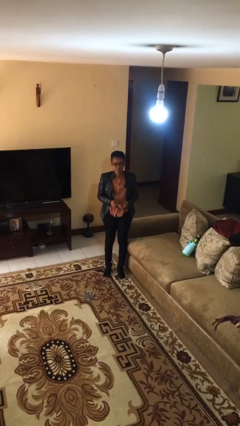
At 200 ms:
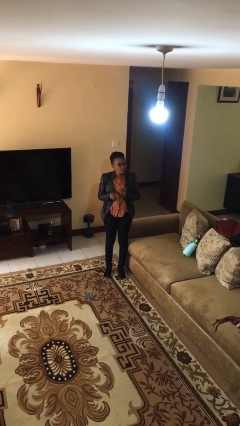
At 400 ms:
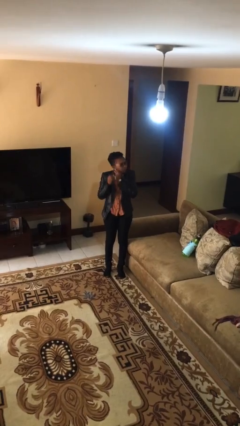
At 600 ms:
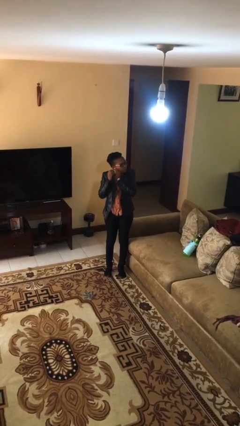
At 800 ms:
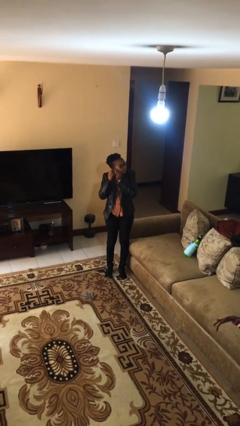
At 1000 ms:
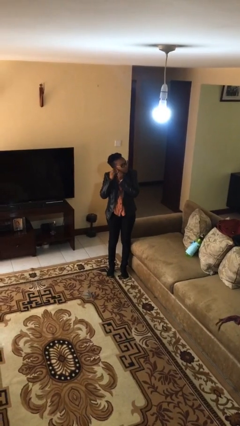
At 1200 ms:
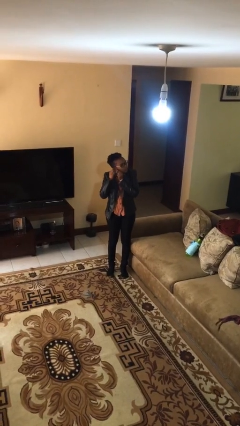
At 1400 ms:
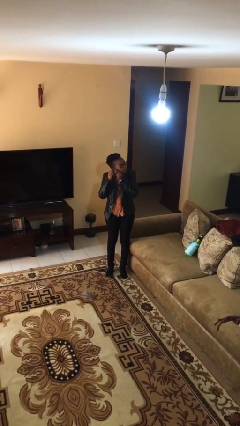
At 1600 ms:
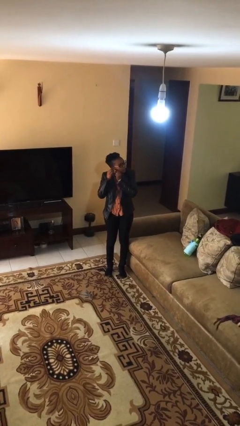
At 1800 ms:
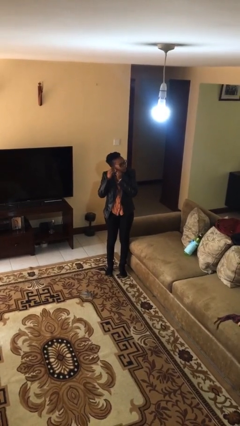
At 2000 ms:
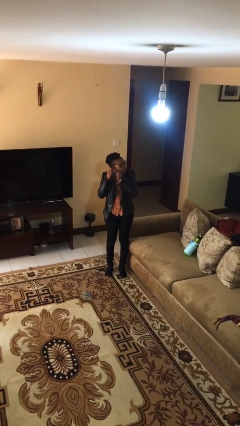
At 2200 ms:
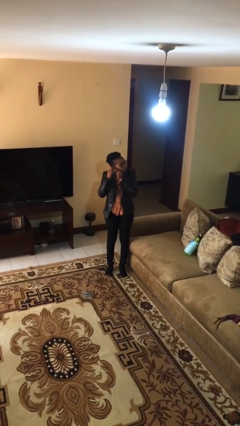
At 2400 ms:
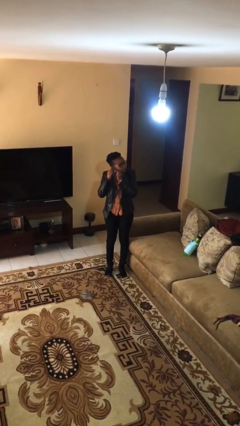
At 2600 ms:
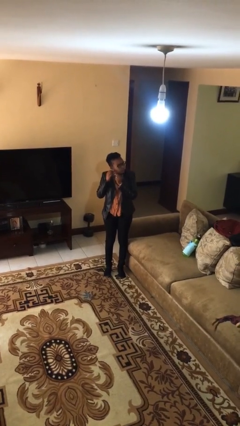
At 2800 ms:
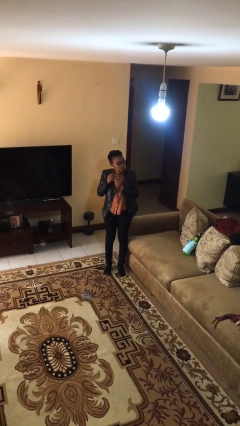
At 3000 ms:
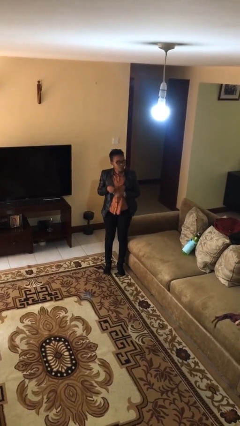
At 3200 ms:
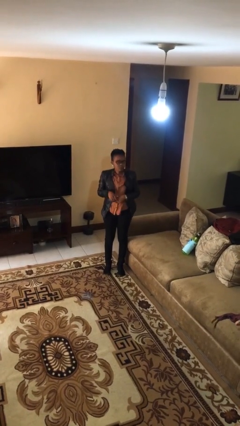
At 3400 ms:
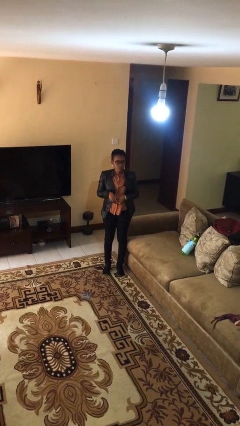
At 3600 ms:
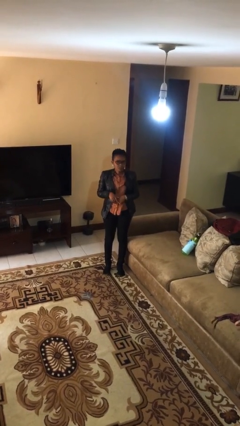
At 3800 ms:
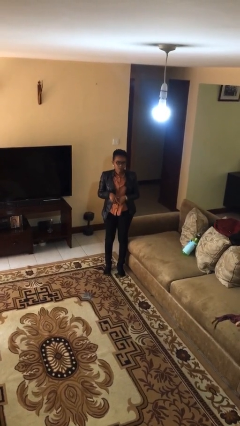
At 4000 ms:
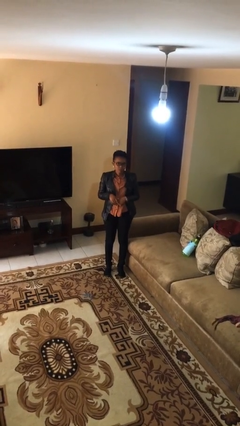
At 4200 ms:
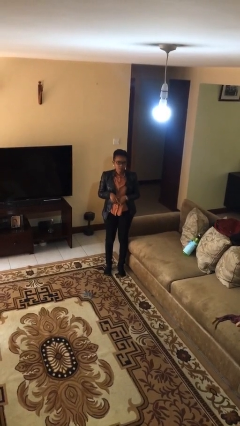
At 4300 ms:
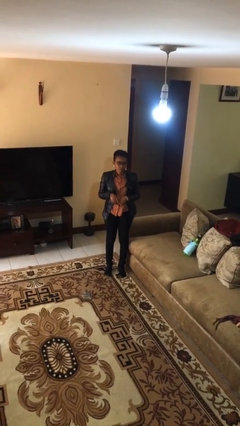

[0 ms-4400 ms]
person puts on earrings

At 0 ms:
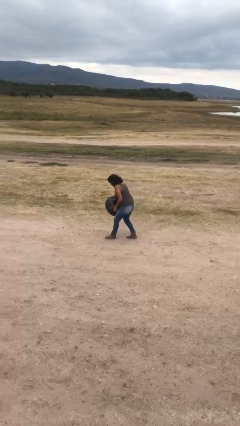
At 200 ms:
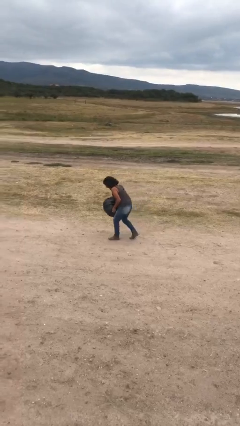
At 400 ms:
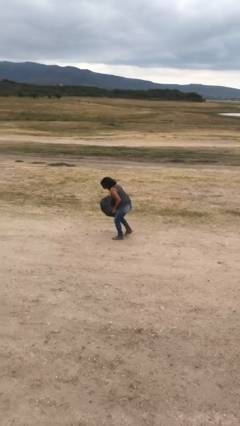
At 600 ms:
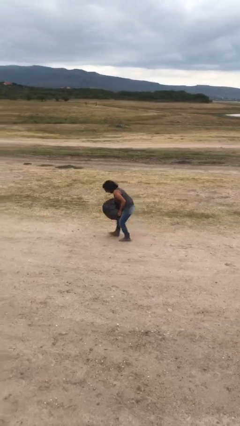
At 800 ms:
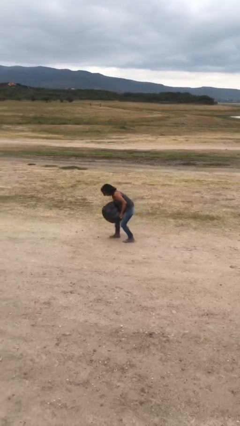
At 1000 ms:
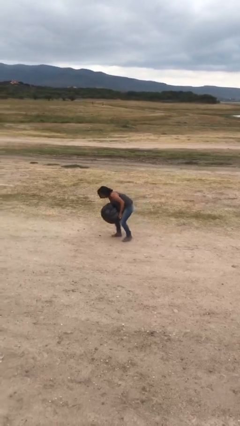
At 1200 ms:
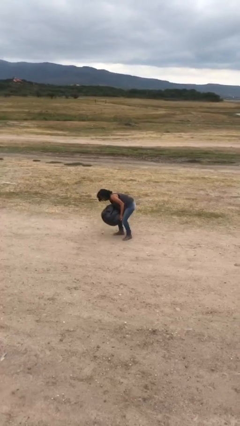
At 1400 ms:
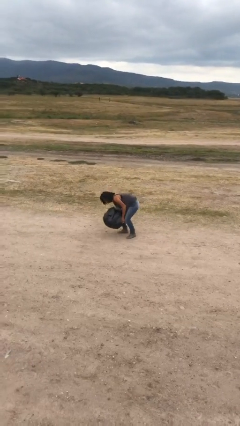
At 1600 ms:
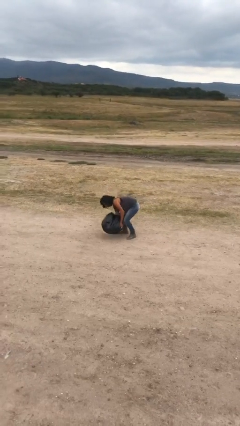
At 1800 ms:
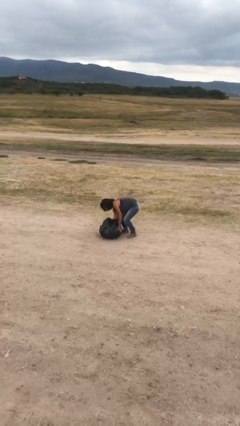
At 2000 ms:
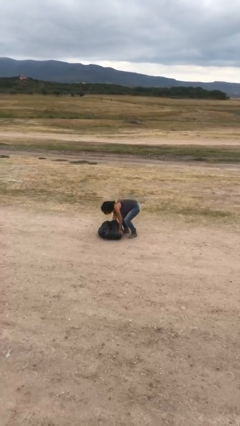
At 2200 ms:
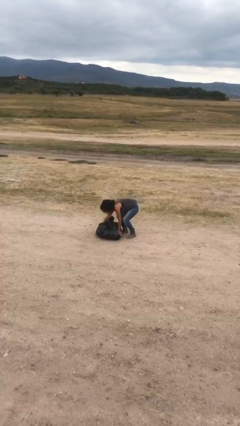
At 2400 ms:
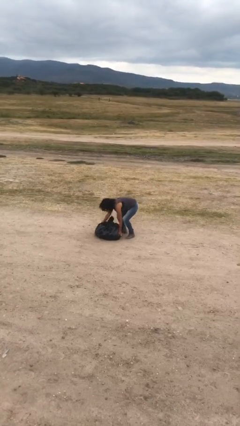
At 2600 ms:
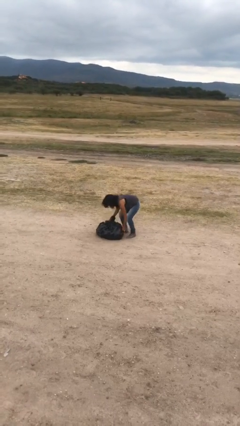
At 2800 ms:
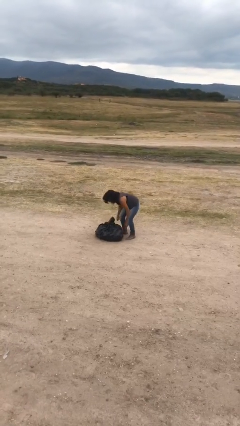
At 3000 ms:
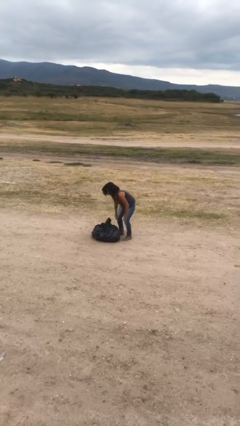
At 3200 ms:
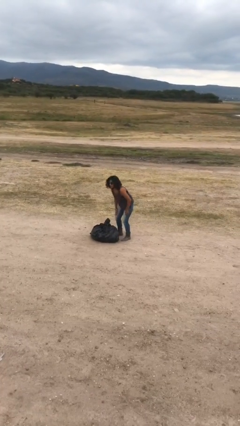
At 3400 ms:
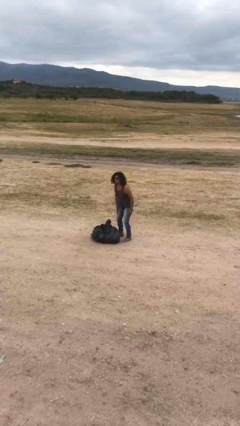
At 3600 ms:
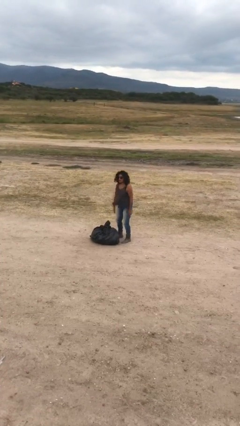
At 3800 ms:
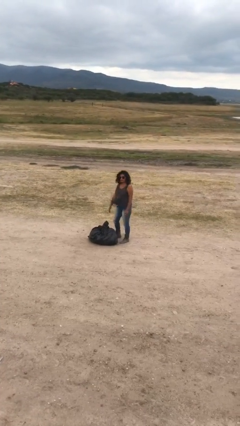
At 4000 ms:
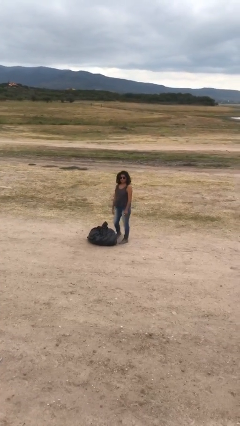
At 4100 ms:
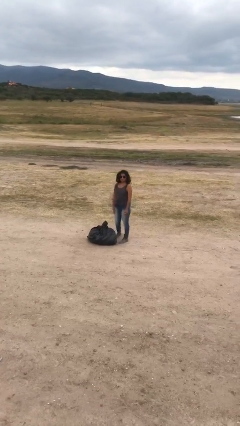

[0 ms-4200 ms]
person puts down object on floor

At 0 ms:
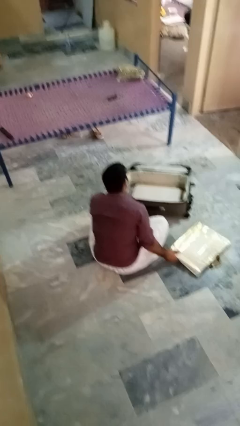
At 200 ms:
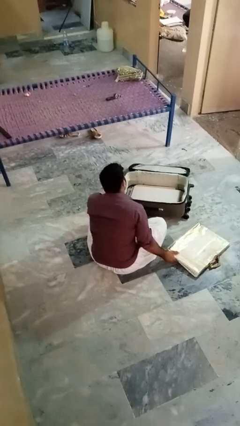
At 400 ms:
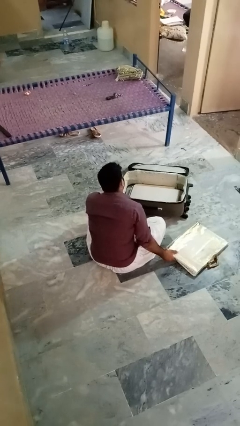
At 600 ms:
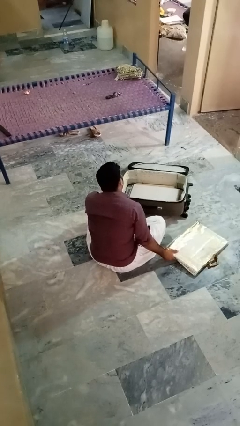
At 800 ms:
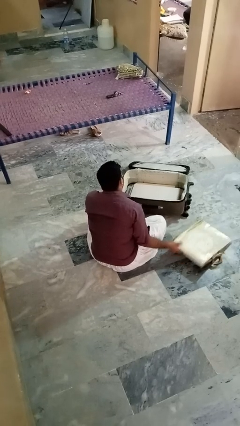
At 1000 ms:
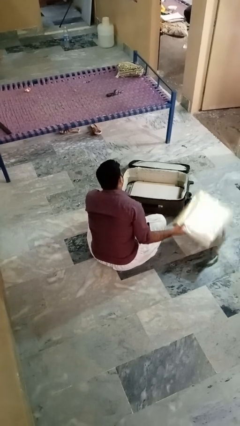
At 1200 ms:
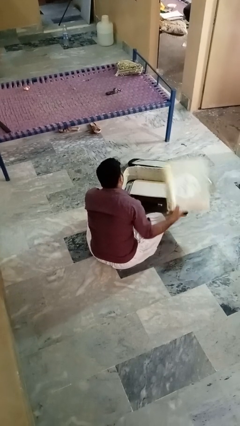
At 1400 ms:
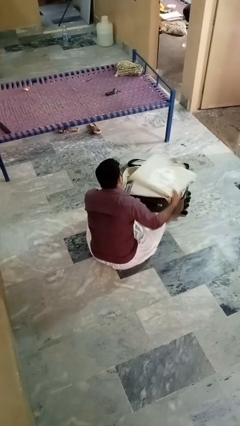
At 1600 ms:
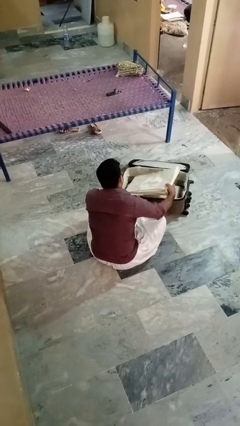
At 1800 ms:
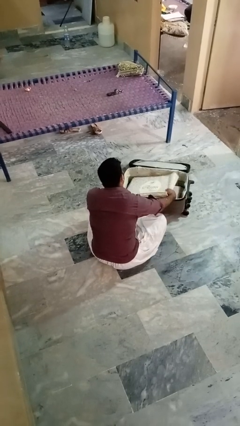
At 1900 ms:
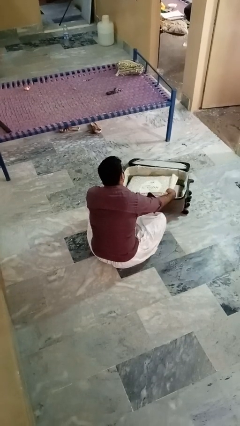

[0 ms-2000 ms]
person puts object into bag

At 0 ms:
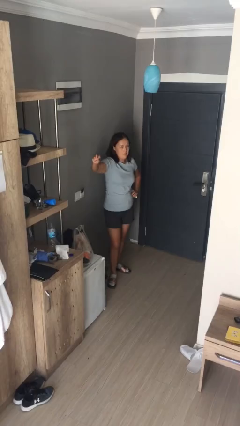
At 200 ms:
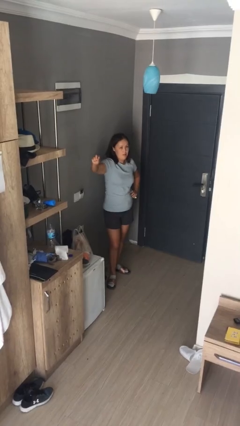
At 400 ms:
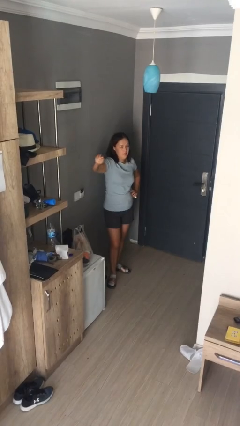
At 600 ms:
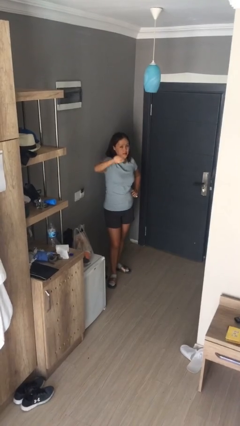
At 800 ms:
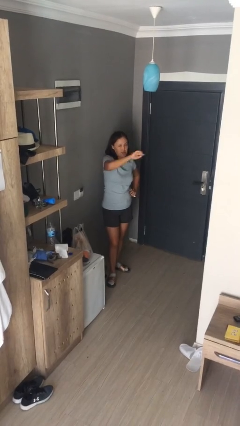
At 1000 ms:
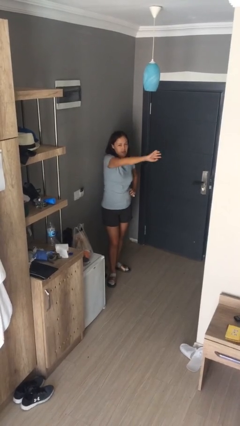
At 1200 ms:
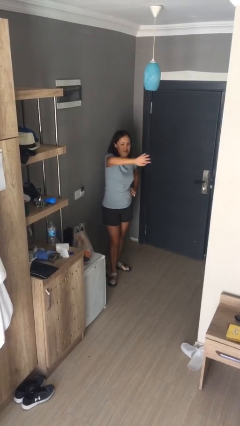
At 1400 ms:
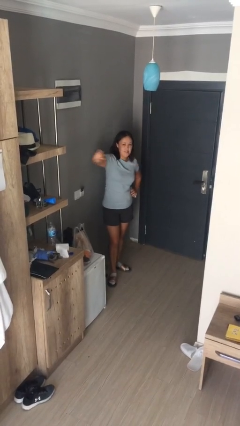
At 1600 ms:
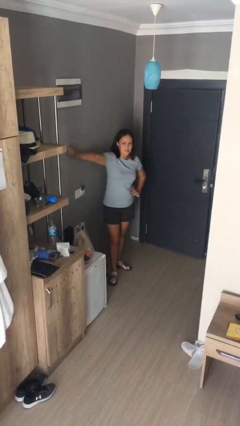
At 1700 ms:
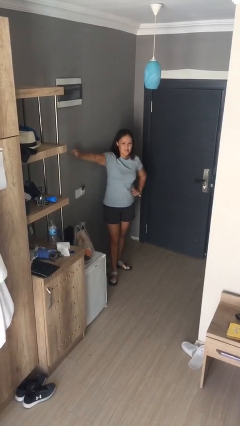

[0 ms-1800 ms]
person gestures swipe right

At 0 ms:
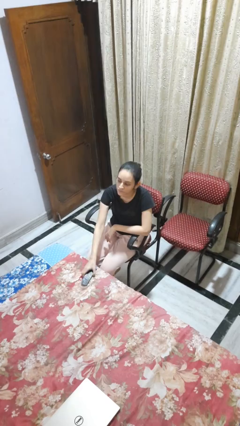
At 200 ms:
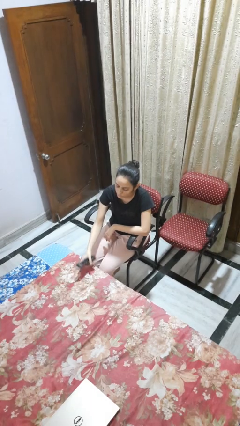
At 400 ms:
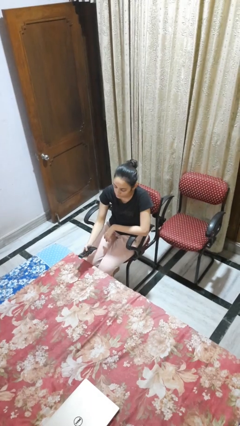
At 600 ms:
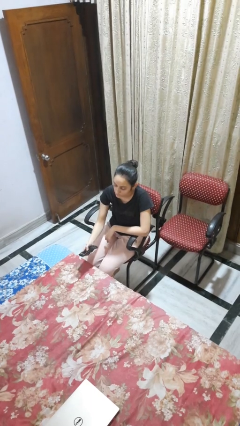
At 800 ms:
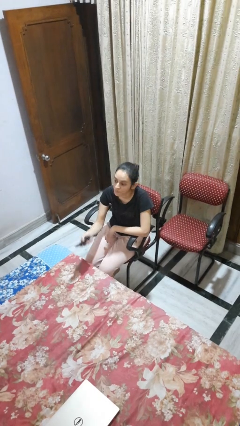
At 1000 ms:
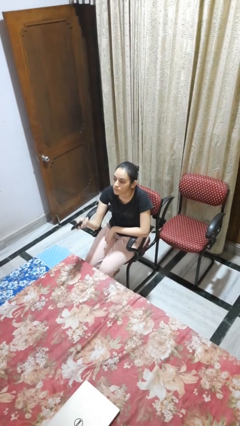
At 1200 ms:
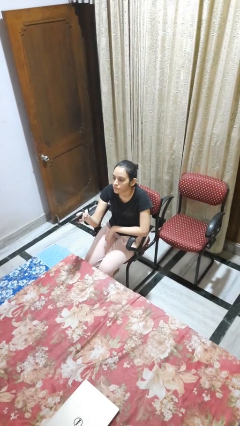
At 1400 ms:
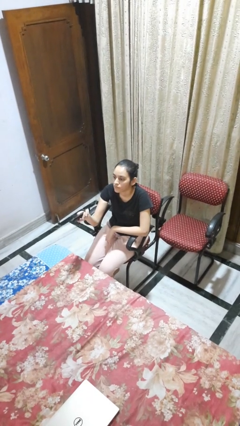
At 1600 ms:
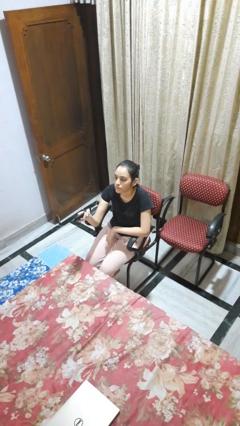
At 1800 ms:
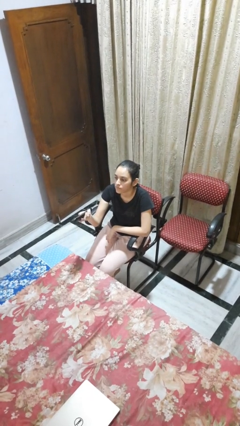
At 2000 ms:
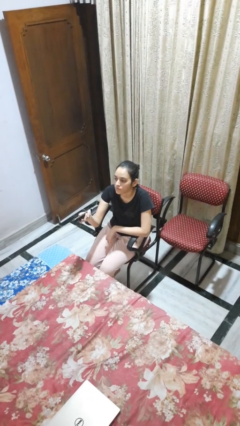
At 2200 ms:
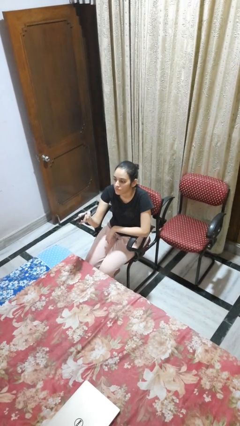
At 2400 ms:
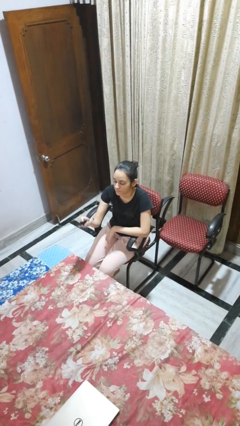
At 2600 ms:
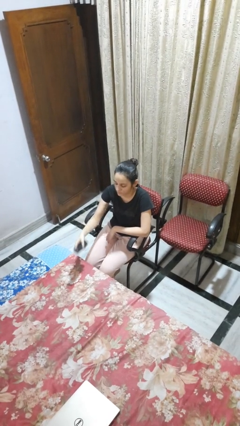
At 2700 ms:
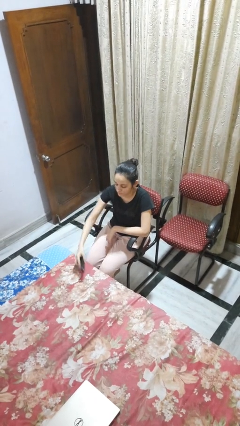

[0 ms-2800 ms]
person uses television remote

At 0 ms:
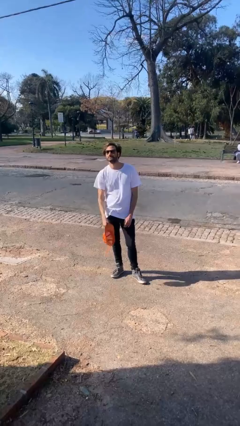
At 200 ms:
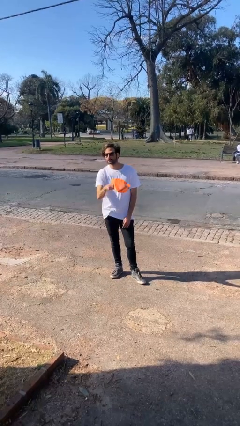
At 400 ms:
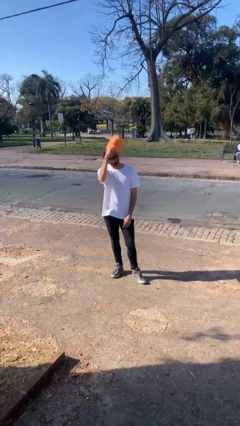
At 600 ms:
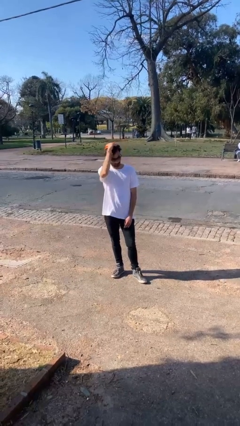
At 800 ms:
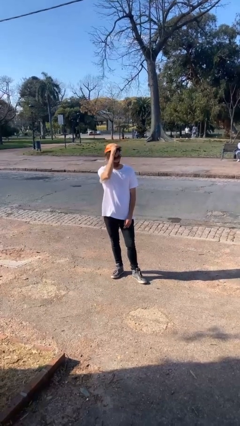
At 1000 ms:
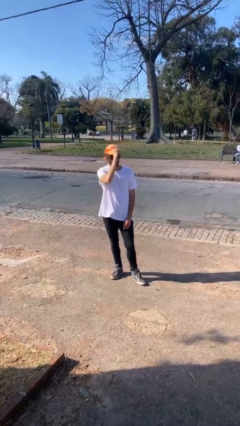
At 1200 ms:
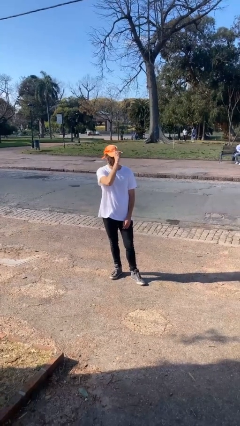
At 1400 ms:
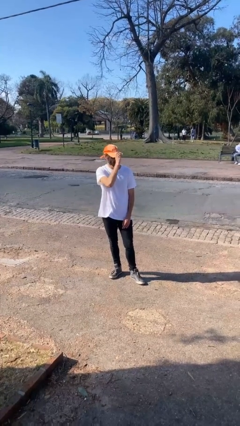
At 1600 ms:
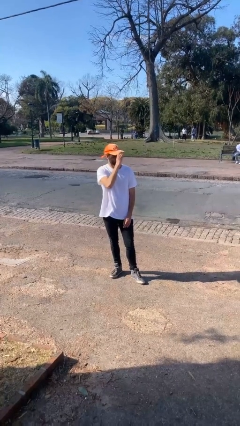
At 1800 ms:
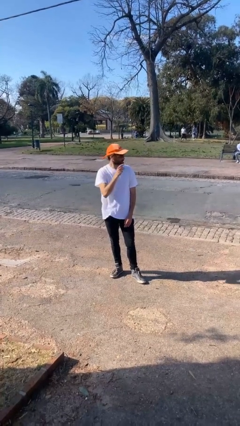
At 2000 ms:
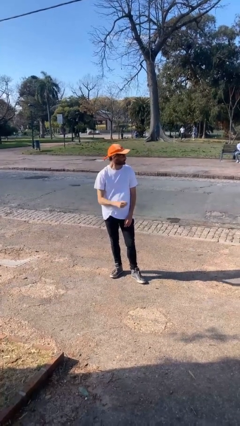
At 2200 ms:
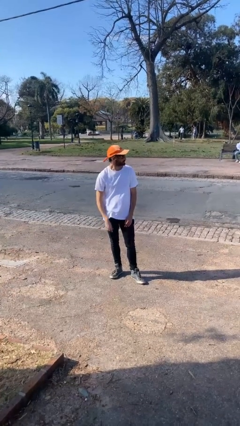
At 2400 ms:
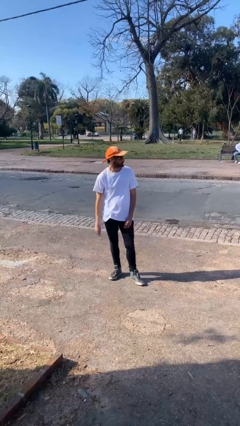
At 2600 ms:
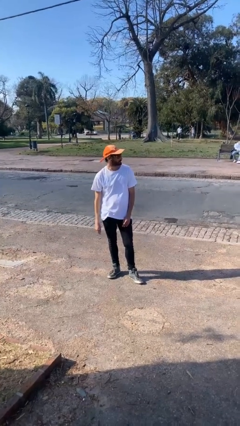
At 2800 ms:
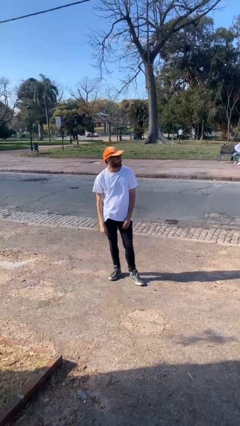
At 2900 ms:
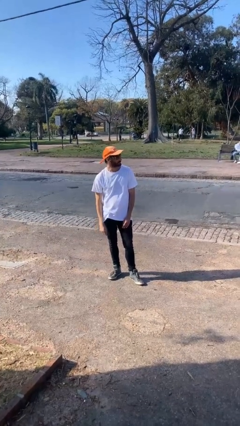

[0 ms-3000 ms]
person puts on hat
